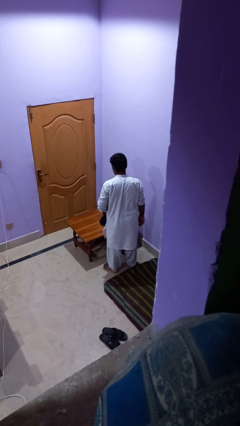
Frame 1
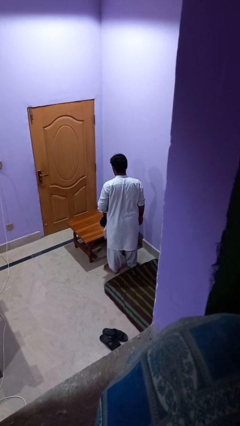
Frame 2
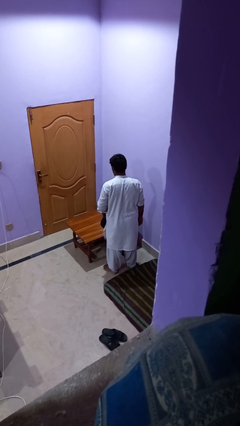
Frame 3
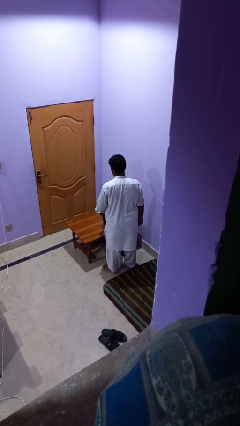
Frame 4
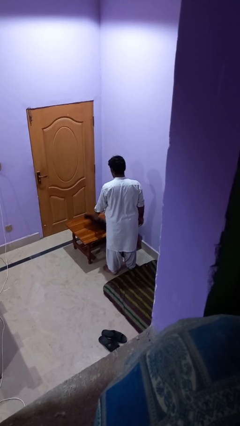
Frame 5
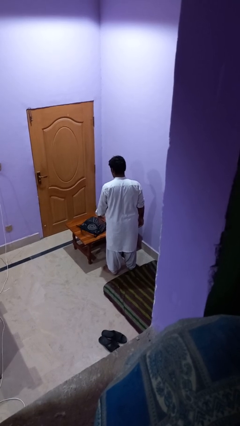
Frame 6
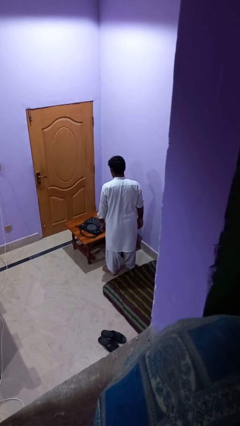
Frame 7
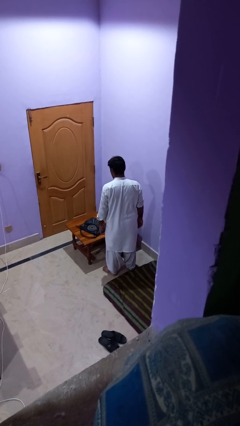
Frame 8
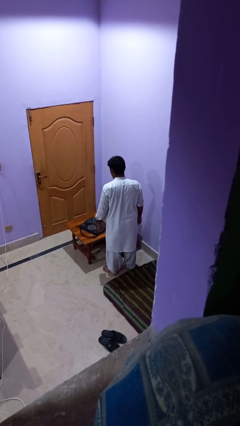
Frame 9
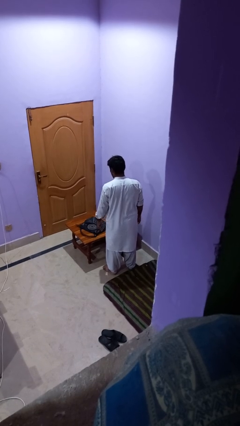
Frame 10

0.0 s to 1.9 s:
person throws object on table

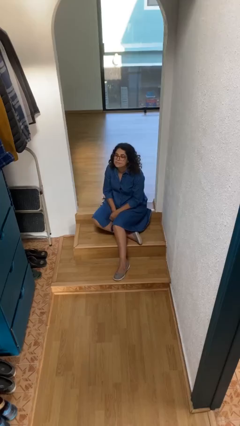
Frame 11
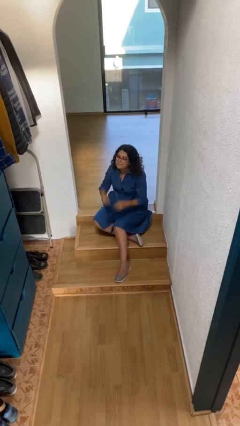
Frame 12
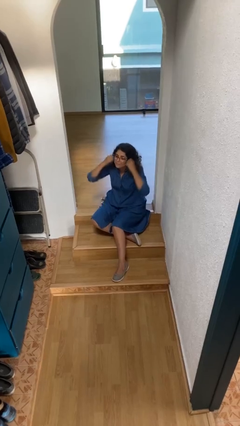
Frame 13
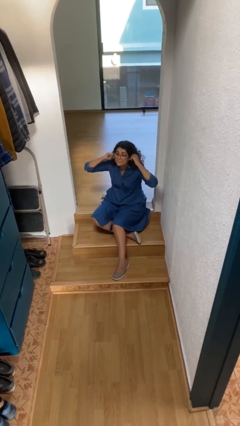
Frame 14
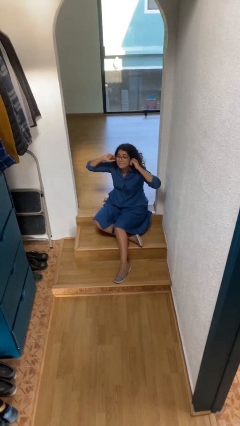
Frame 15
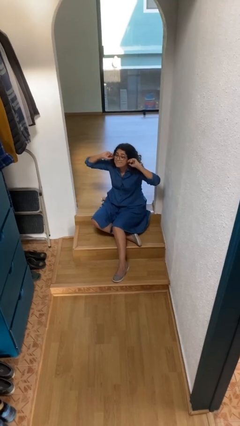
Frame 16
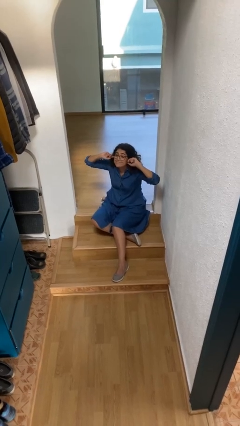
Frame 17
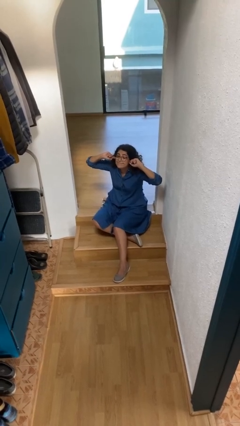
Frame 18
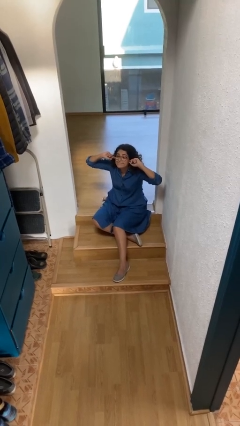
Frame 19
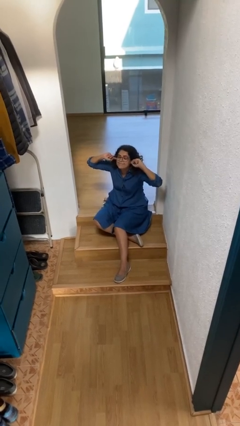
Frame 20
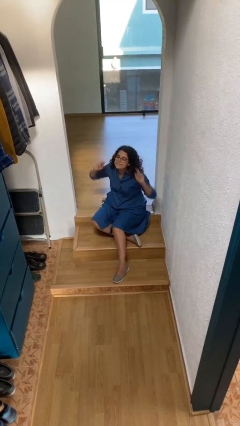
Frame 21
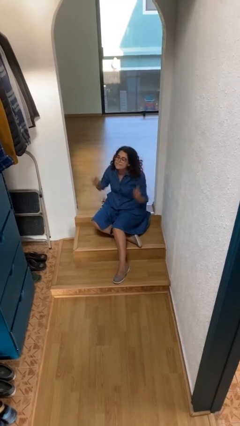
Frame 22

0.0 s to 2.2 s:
person puts fingers in ear

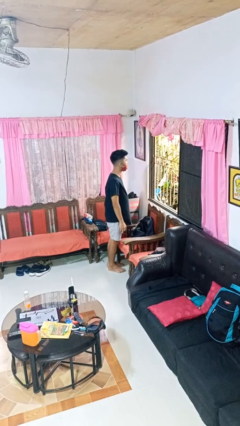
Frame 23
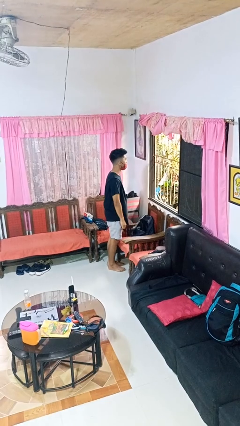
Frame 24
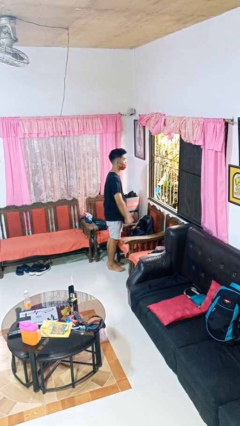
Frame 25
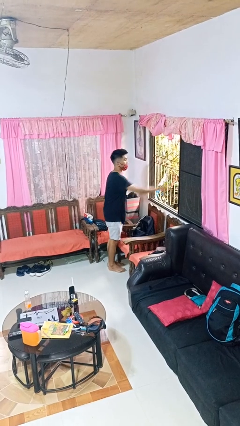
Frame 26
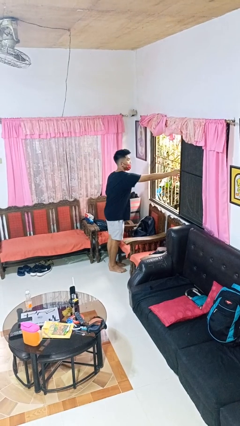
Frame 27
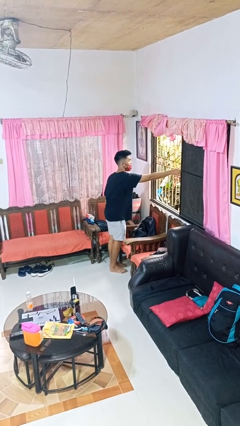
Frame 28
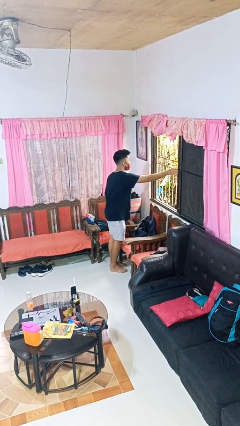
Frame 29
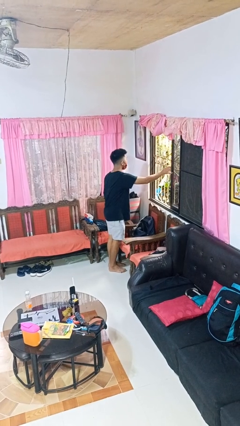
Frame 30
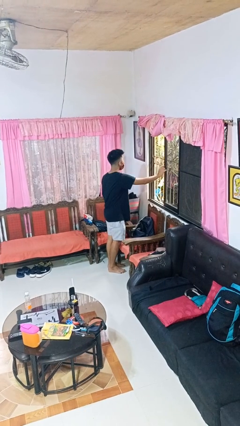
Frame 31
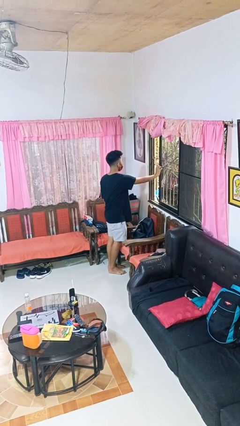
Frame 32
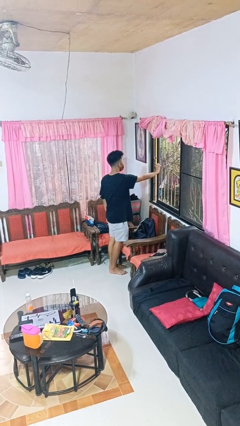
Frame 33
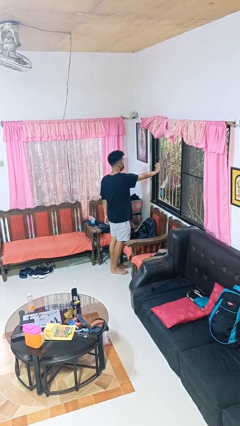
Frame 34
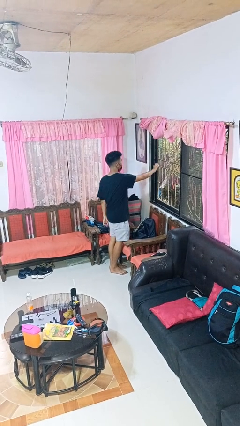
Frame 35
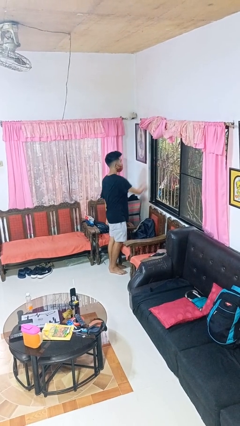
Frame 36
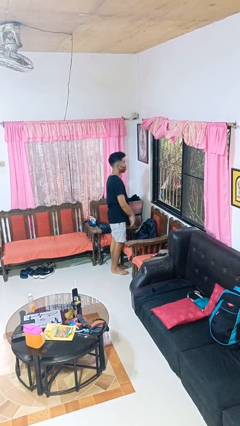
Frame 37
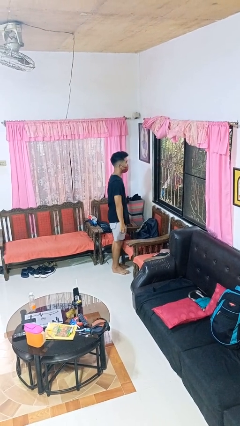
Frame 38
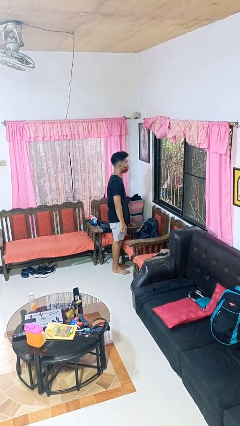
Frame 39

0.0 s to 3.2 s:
person closes home window

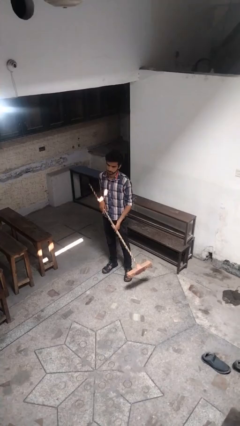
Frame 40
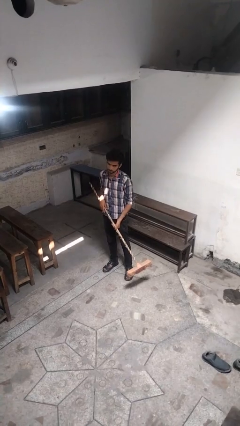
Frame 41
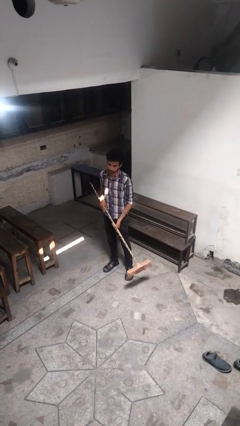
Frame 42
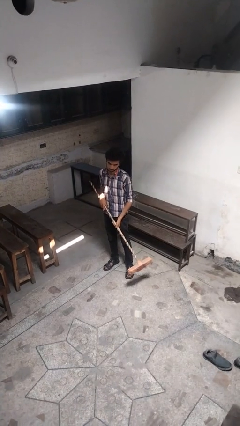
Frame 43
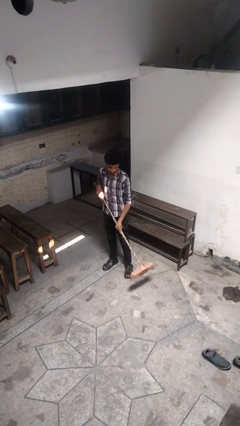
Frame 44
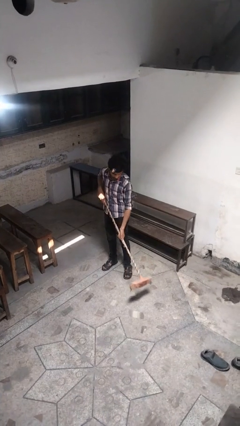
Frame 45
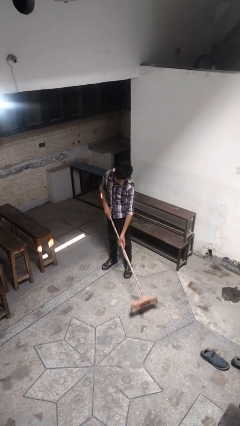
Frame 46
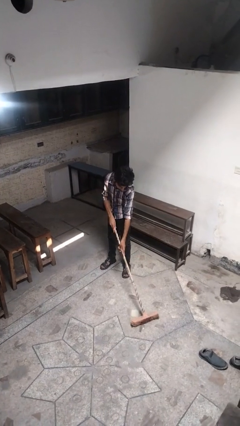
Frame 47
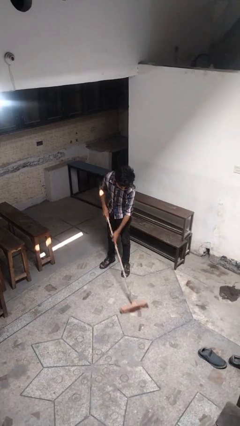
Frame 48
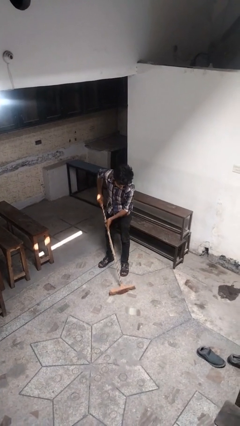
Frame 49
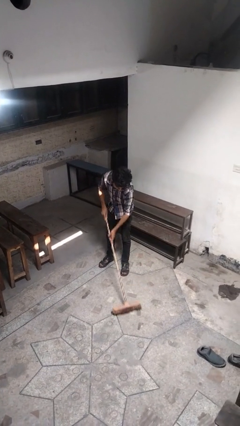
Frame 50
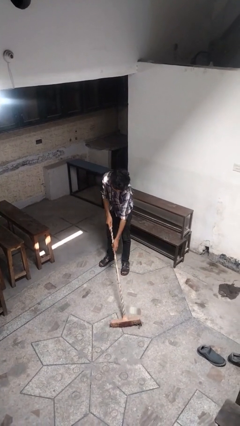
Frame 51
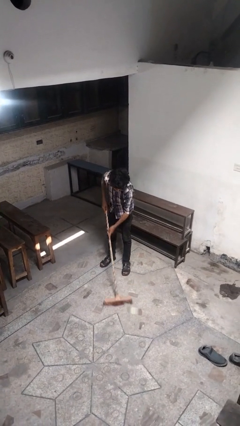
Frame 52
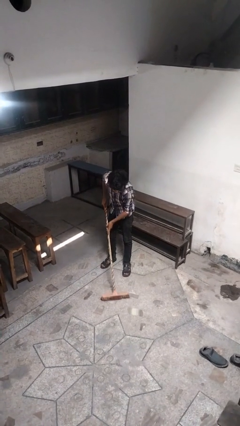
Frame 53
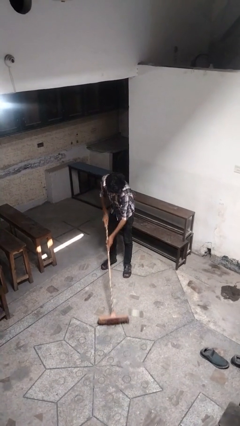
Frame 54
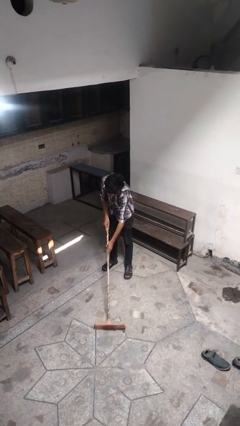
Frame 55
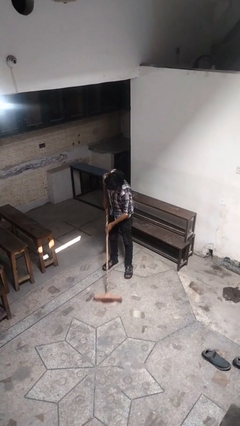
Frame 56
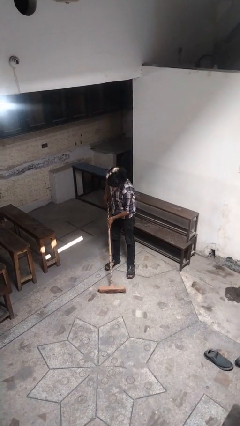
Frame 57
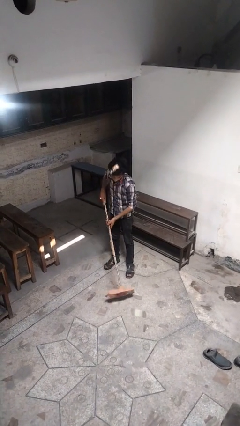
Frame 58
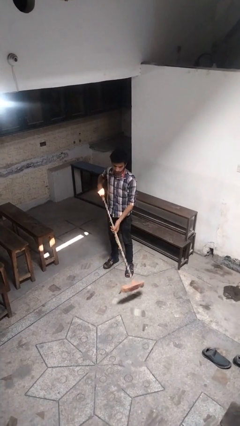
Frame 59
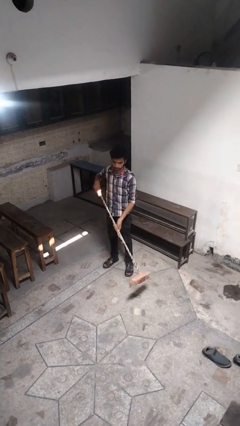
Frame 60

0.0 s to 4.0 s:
person sweeps floor

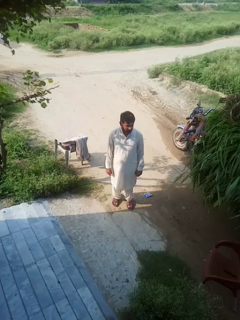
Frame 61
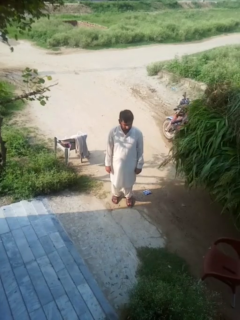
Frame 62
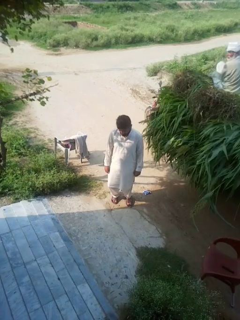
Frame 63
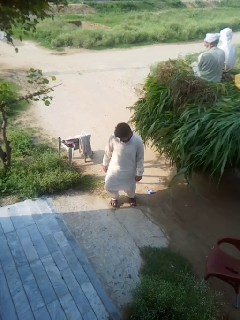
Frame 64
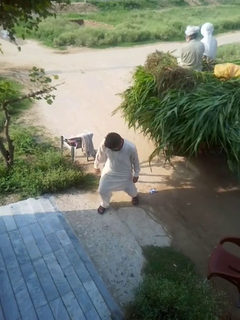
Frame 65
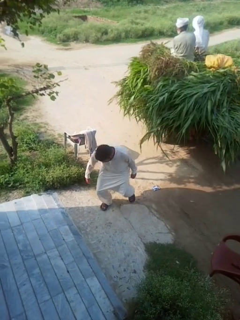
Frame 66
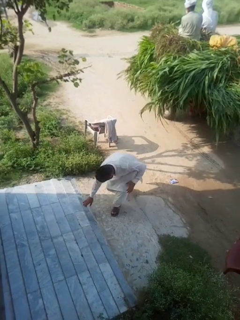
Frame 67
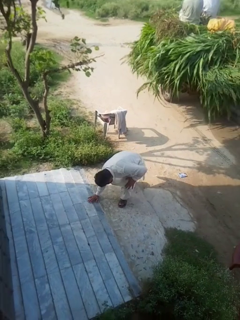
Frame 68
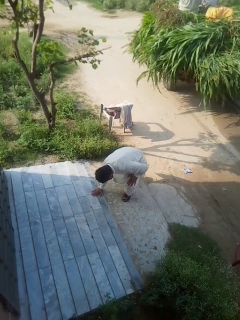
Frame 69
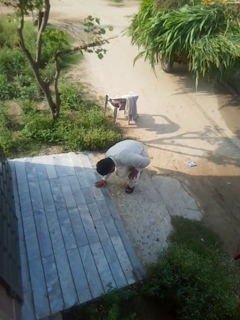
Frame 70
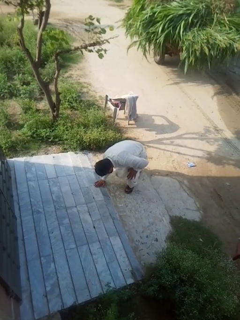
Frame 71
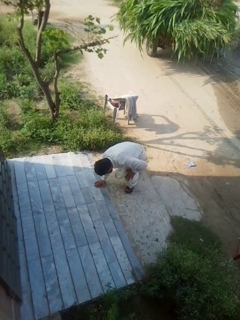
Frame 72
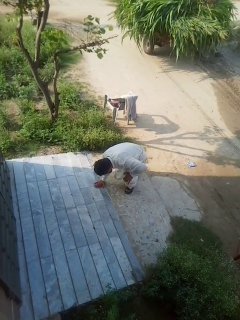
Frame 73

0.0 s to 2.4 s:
person trips on object on floor

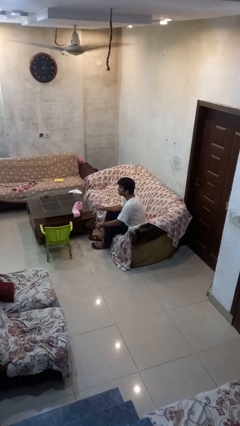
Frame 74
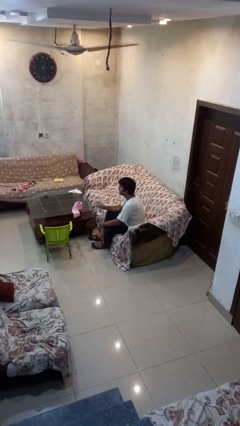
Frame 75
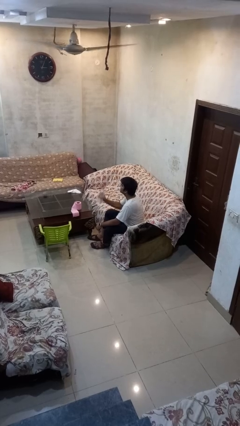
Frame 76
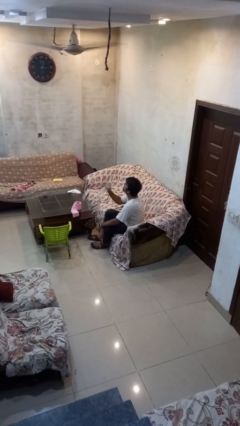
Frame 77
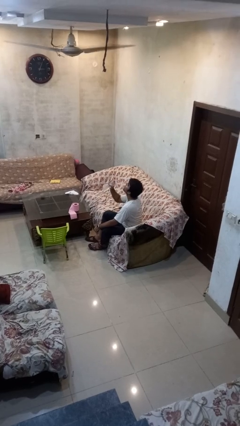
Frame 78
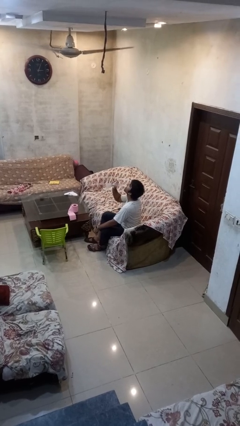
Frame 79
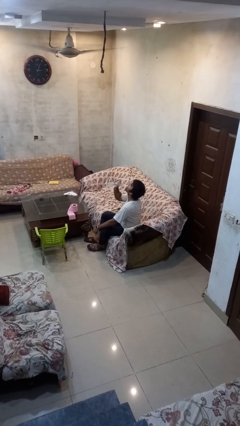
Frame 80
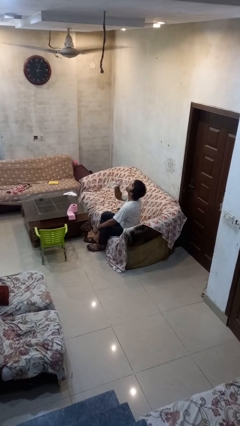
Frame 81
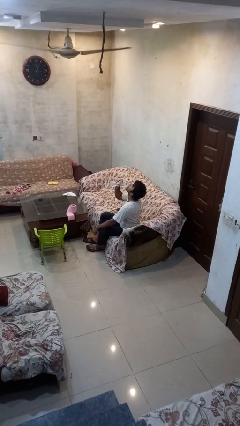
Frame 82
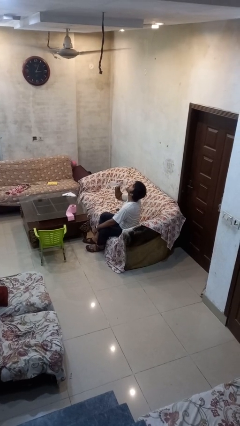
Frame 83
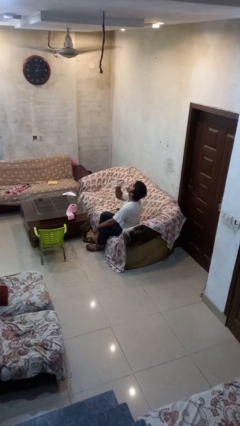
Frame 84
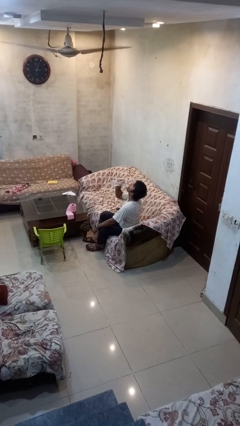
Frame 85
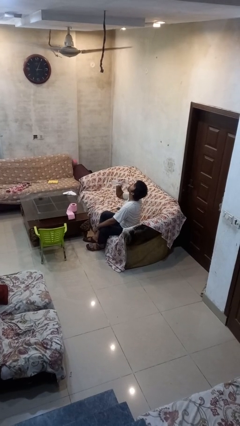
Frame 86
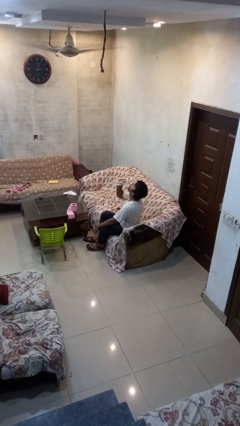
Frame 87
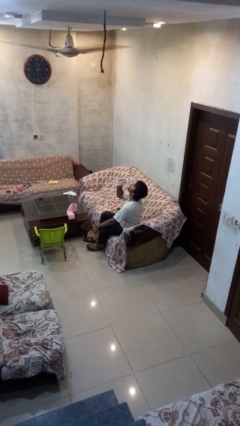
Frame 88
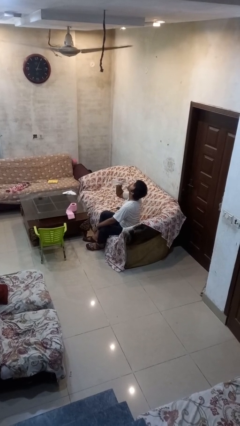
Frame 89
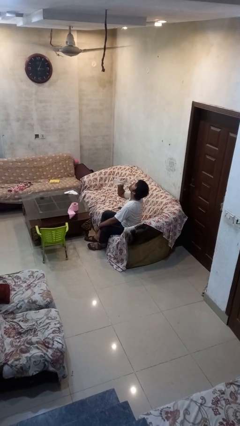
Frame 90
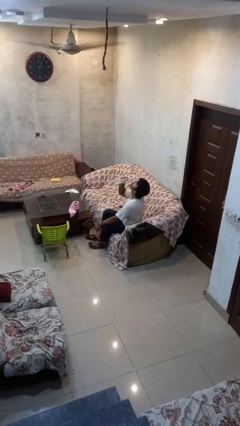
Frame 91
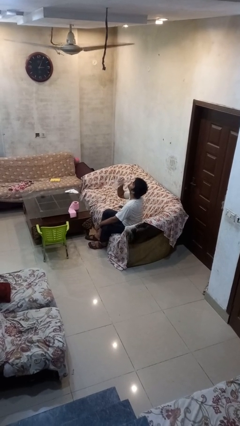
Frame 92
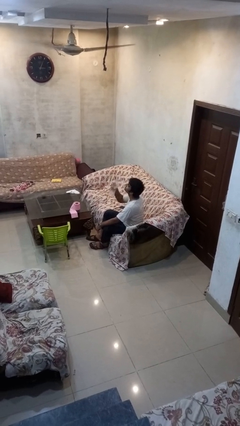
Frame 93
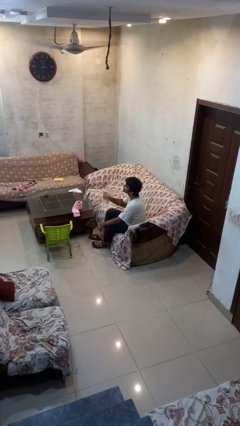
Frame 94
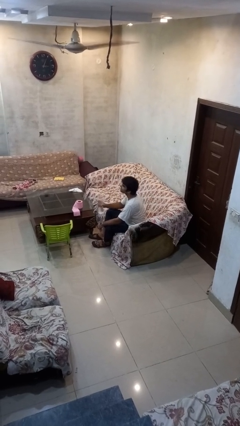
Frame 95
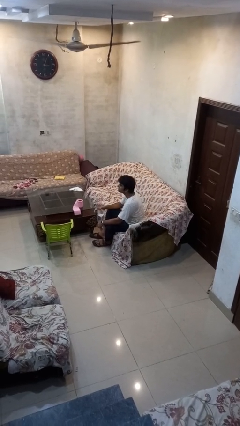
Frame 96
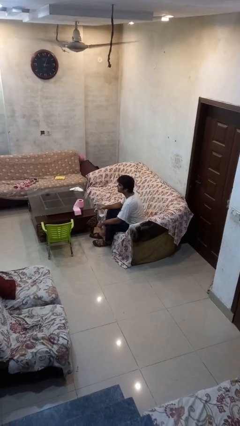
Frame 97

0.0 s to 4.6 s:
person drinks from bottle
